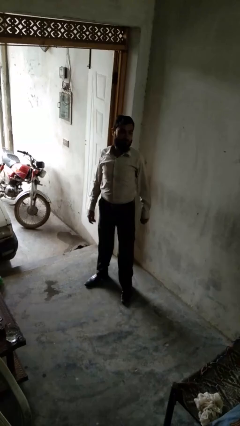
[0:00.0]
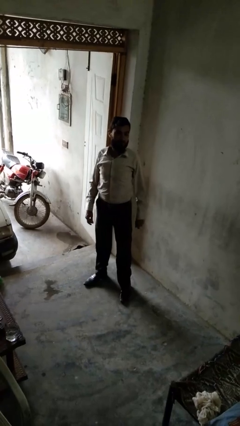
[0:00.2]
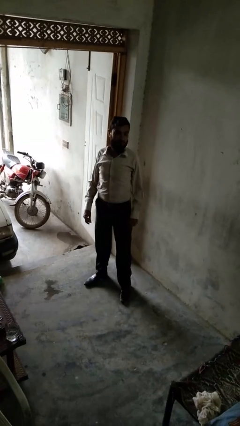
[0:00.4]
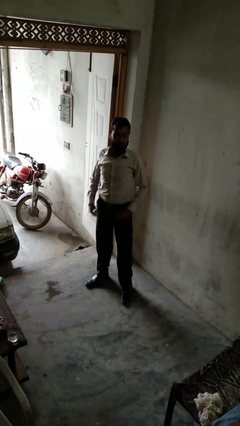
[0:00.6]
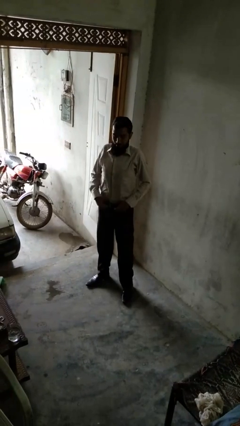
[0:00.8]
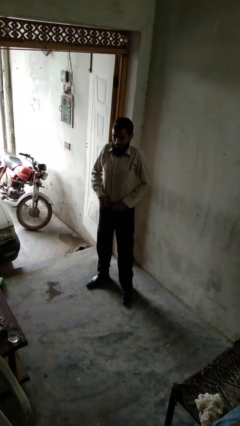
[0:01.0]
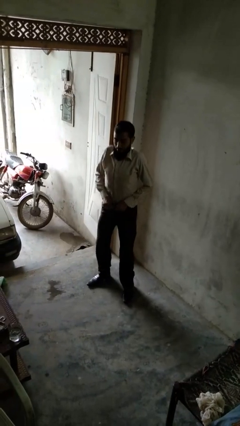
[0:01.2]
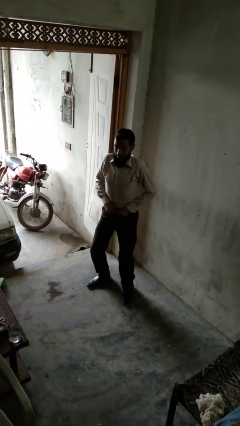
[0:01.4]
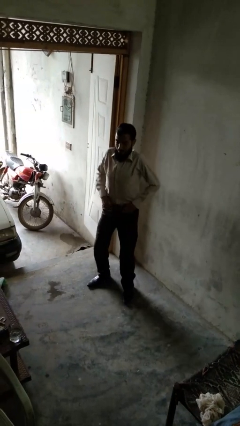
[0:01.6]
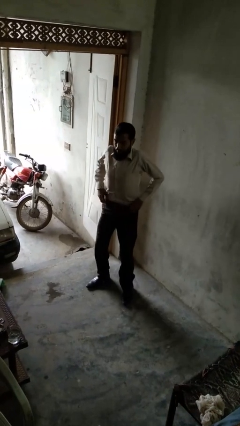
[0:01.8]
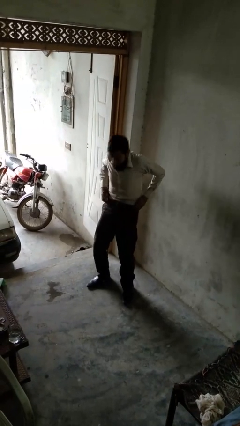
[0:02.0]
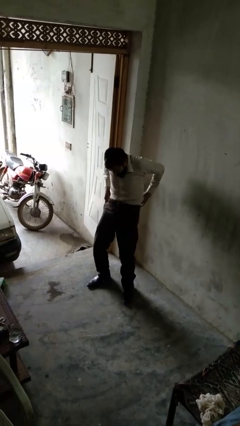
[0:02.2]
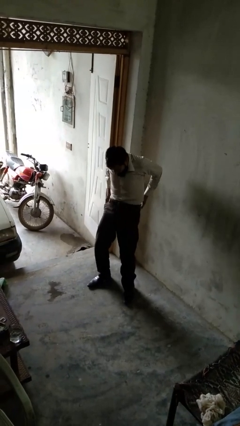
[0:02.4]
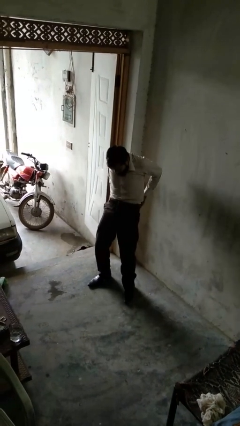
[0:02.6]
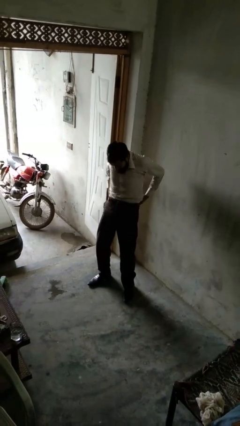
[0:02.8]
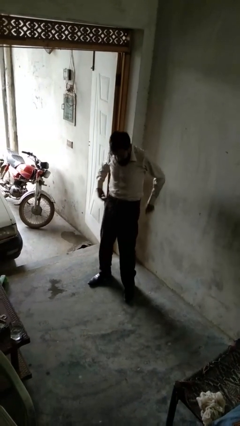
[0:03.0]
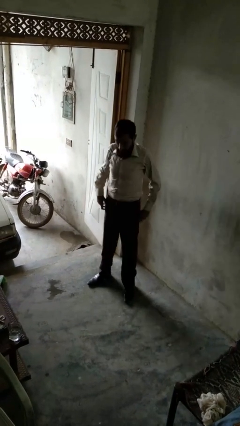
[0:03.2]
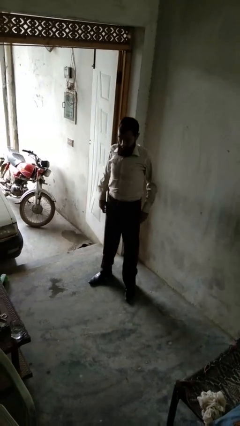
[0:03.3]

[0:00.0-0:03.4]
person hikes up pants

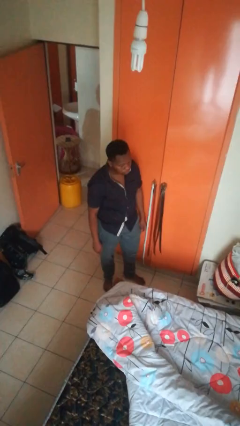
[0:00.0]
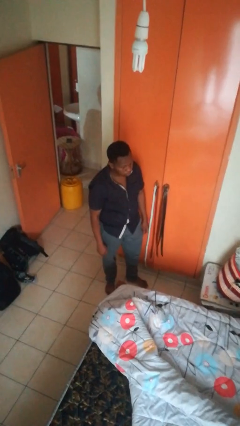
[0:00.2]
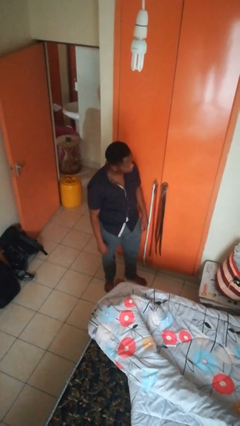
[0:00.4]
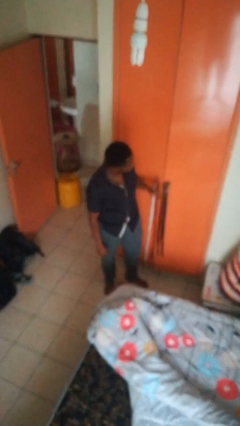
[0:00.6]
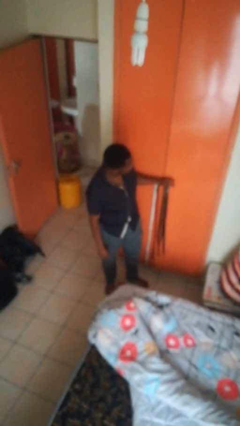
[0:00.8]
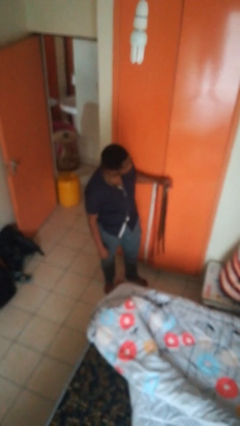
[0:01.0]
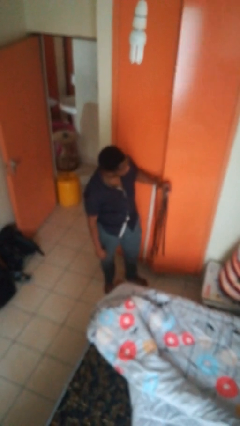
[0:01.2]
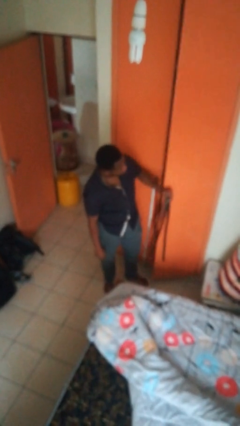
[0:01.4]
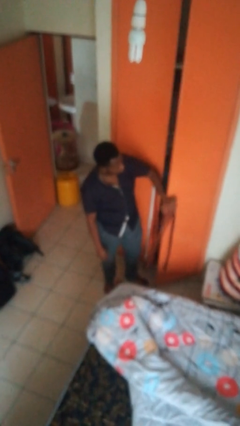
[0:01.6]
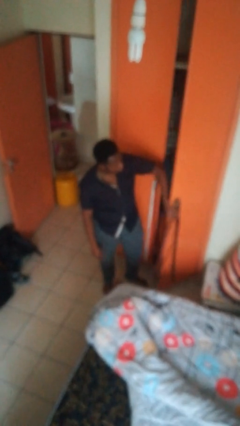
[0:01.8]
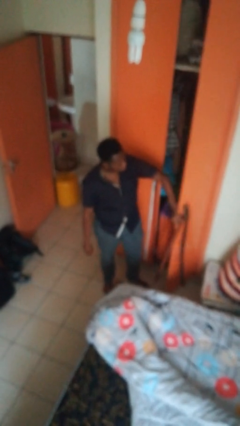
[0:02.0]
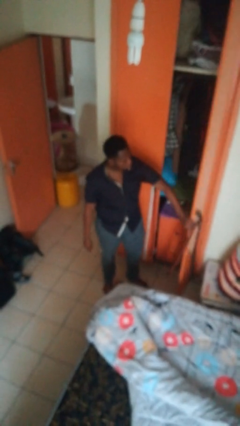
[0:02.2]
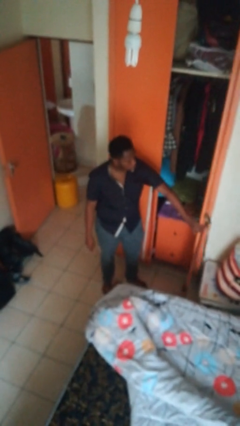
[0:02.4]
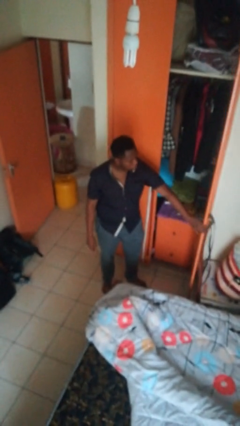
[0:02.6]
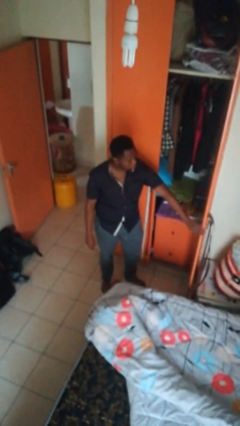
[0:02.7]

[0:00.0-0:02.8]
person opens closet door

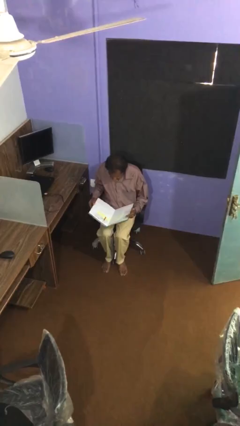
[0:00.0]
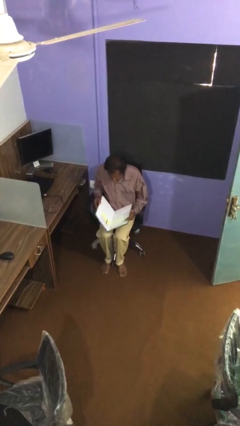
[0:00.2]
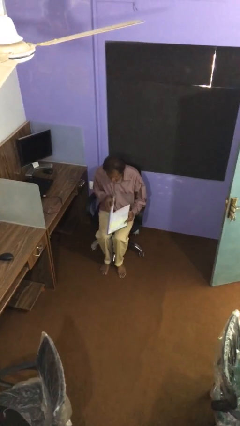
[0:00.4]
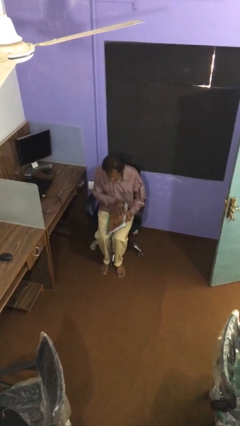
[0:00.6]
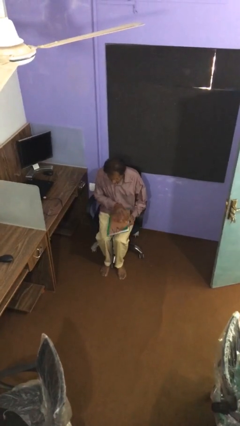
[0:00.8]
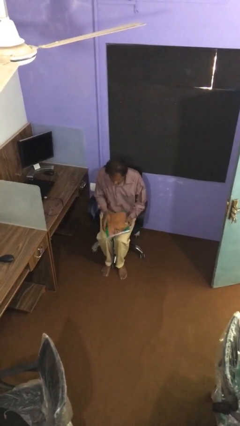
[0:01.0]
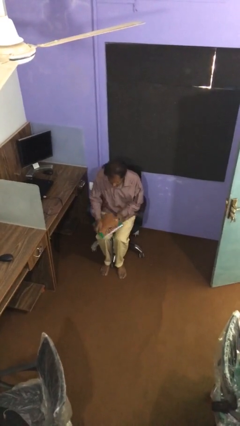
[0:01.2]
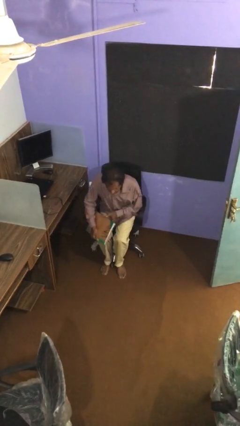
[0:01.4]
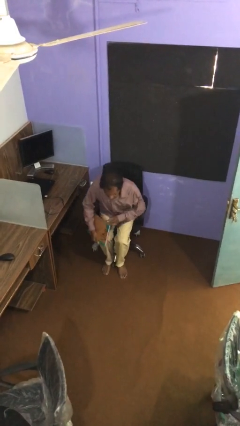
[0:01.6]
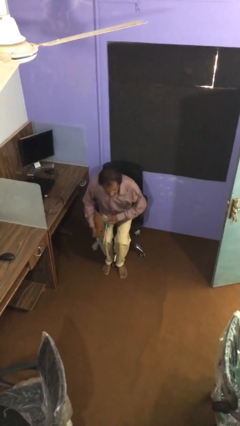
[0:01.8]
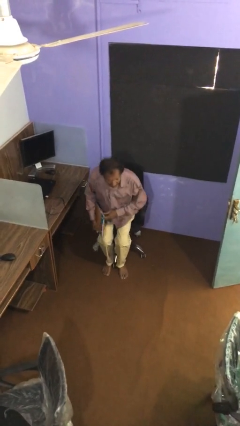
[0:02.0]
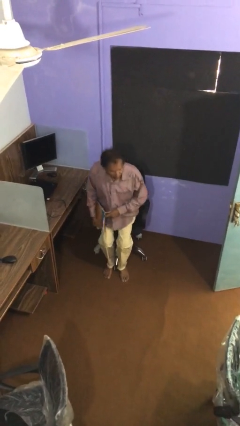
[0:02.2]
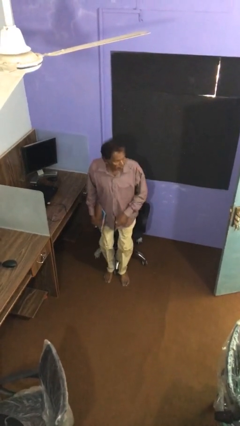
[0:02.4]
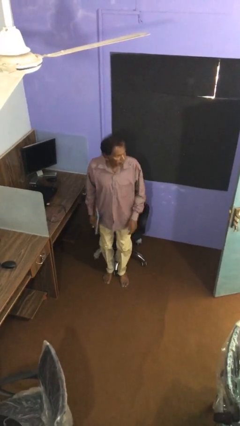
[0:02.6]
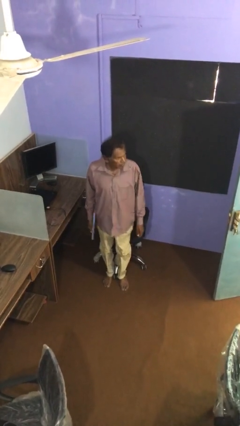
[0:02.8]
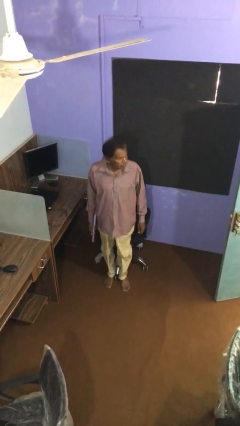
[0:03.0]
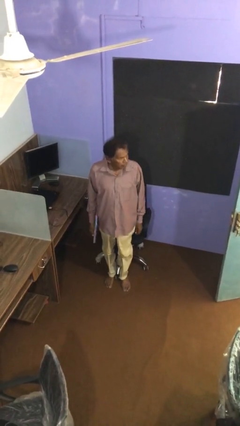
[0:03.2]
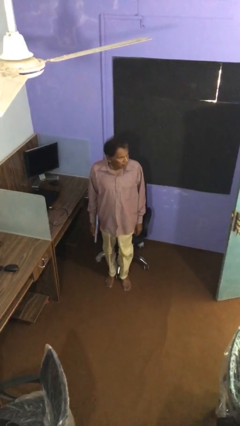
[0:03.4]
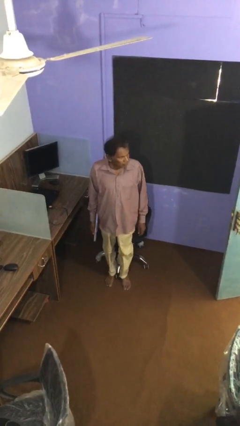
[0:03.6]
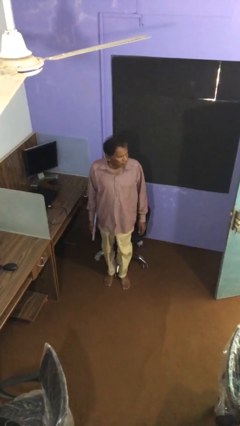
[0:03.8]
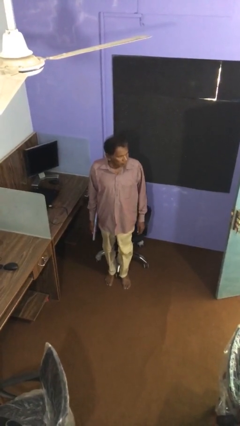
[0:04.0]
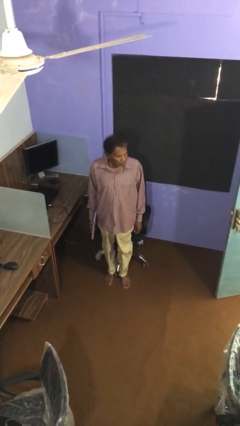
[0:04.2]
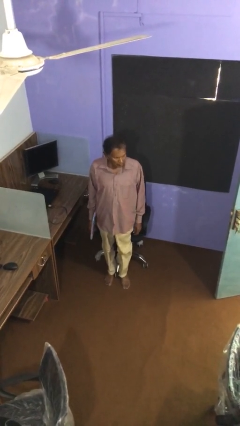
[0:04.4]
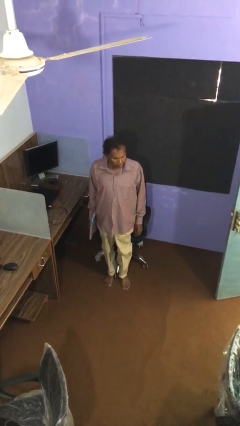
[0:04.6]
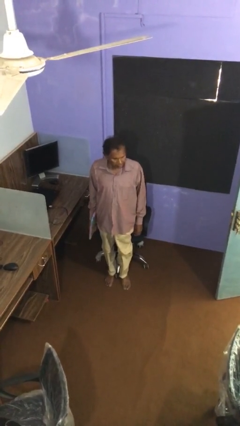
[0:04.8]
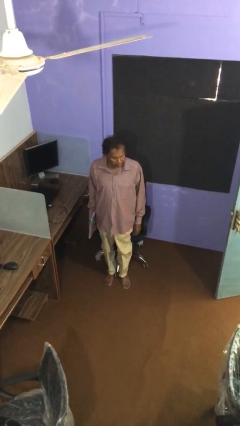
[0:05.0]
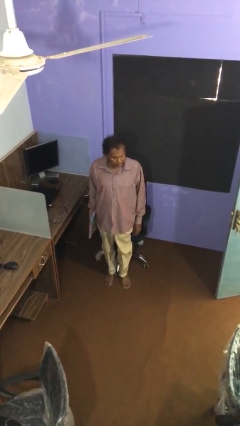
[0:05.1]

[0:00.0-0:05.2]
person stands up

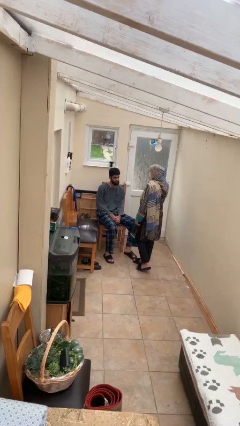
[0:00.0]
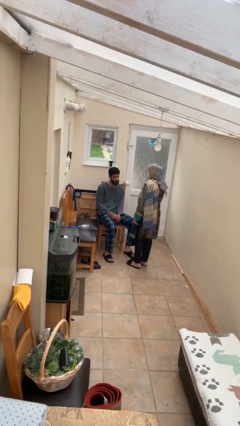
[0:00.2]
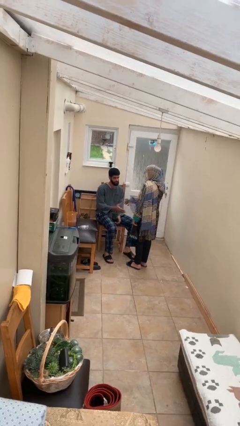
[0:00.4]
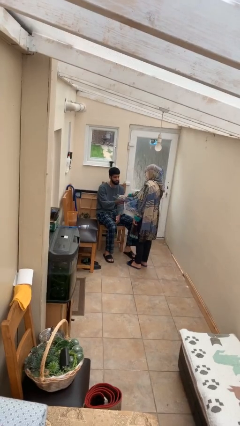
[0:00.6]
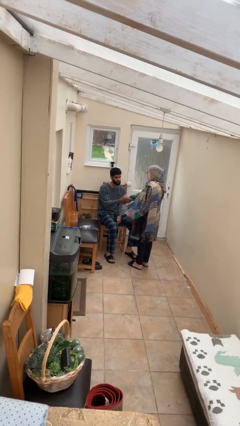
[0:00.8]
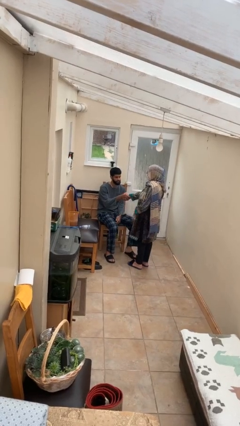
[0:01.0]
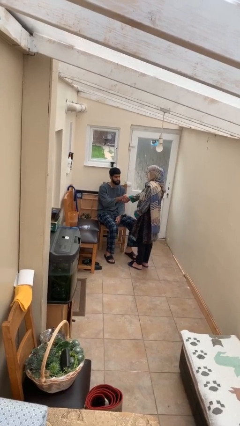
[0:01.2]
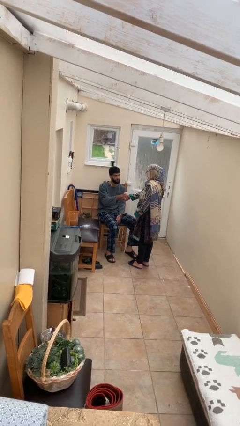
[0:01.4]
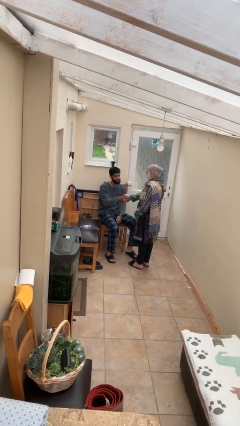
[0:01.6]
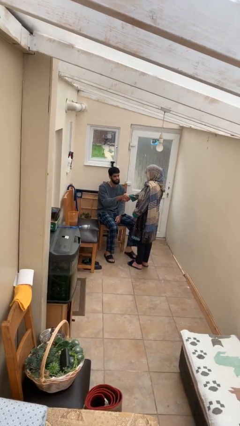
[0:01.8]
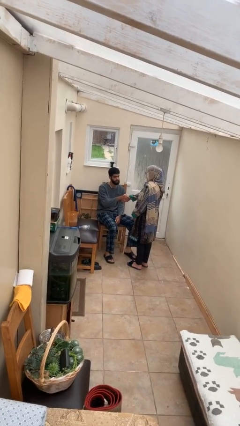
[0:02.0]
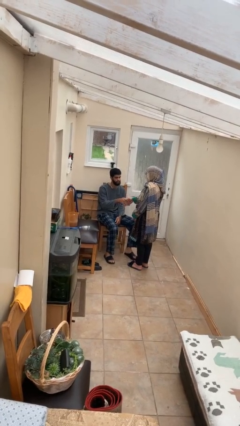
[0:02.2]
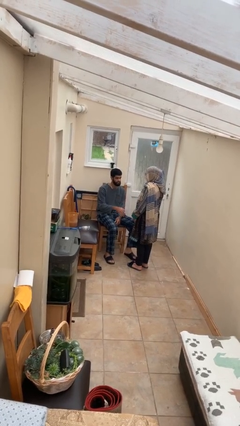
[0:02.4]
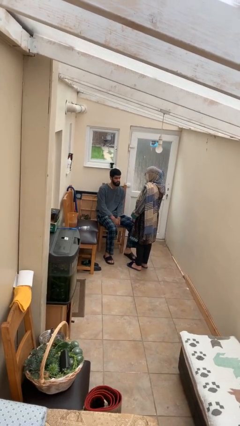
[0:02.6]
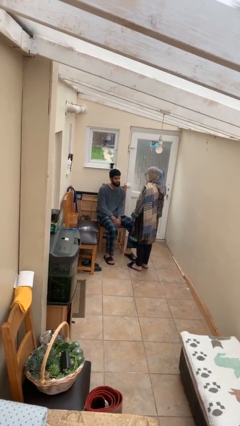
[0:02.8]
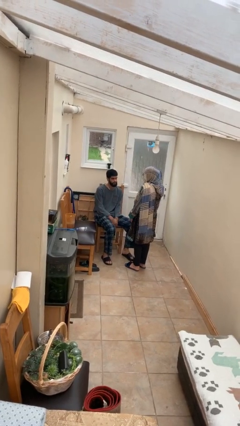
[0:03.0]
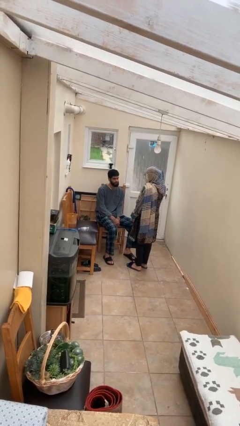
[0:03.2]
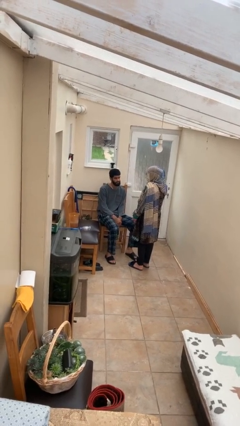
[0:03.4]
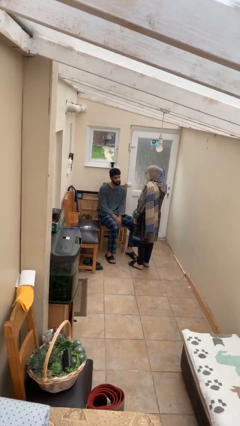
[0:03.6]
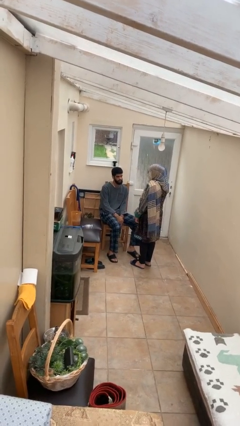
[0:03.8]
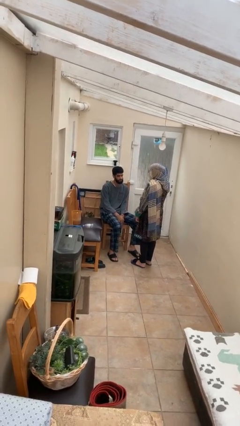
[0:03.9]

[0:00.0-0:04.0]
person shakes hand

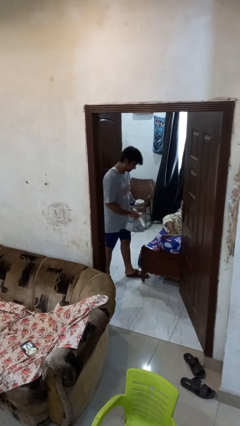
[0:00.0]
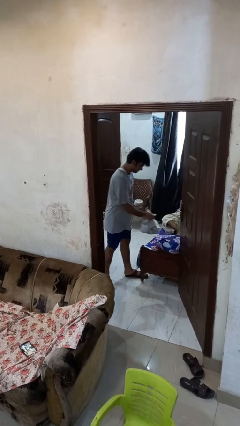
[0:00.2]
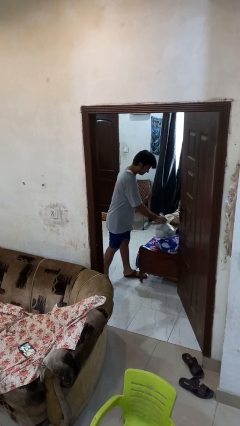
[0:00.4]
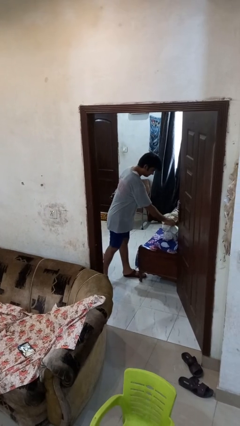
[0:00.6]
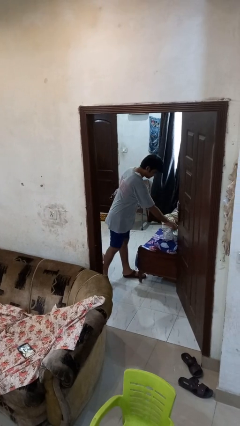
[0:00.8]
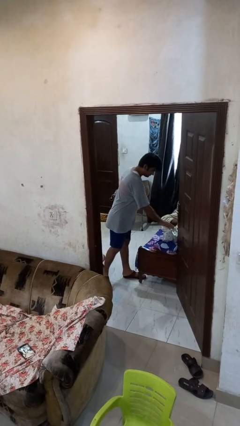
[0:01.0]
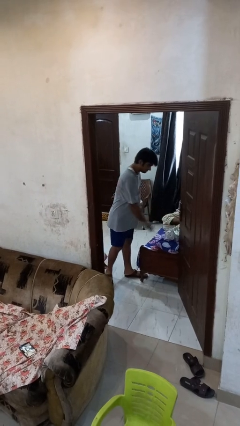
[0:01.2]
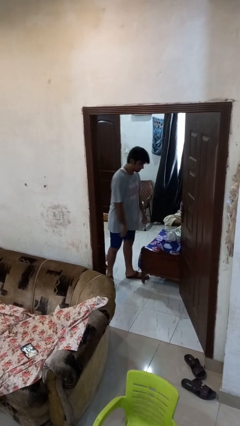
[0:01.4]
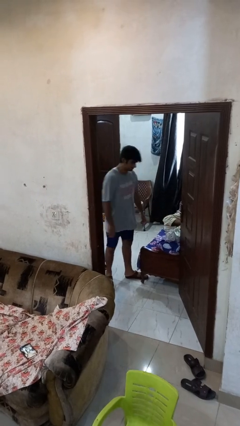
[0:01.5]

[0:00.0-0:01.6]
person puts down object on bed

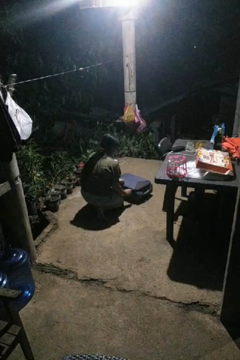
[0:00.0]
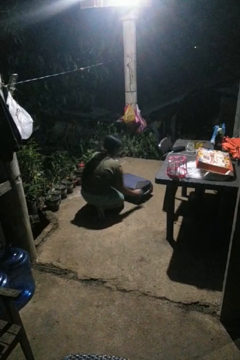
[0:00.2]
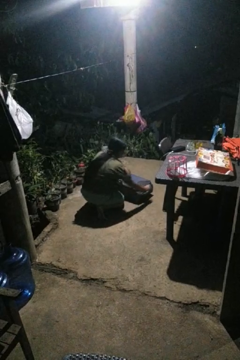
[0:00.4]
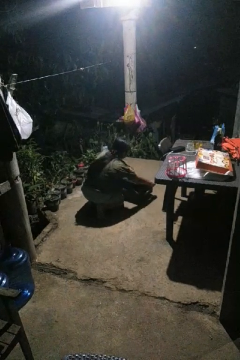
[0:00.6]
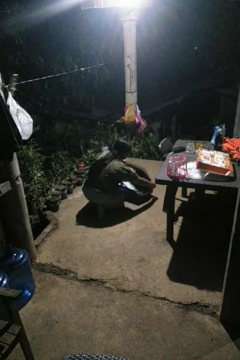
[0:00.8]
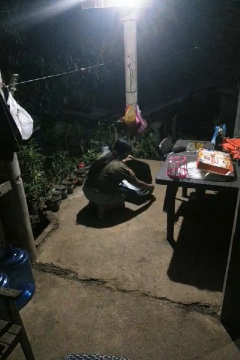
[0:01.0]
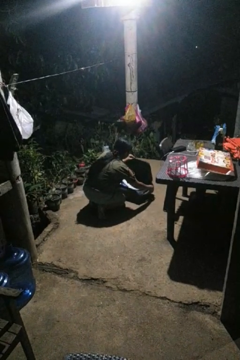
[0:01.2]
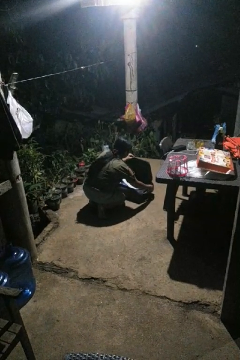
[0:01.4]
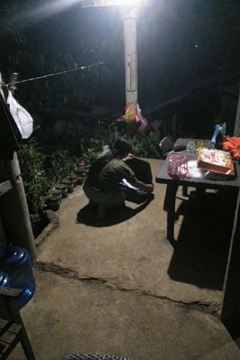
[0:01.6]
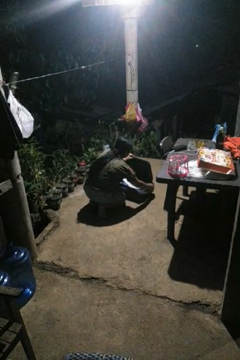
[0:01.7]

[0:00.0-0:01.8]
person opens suitcase
